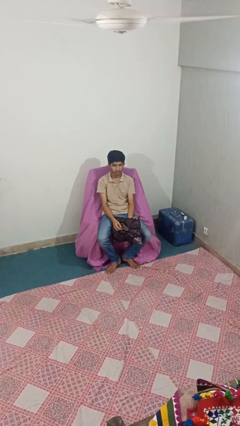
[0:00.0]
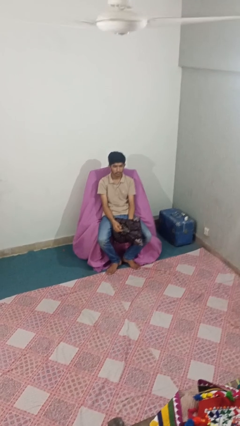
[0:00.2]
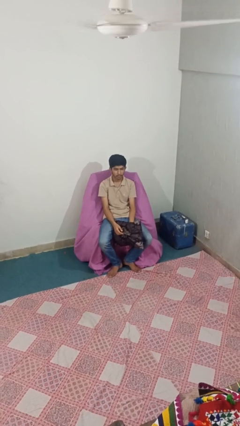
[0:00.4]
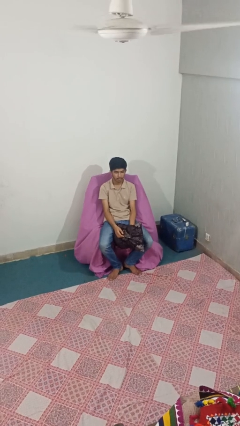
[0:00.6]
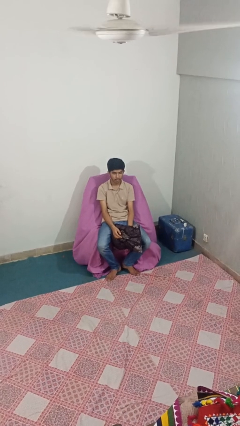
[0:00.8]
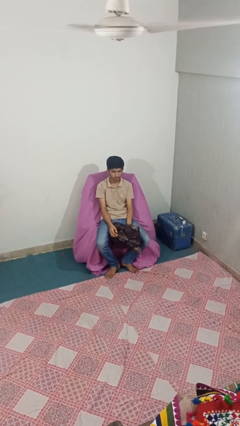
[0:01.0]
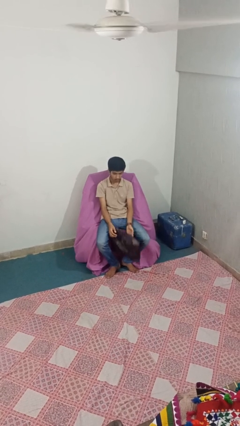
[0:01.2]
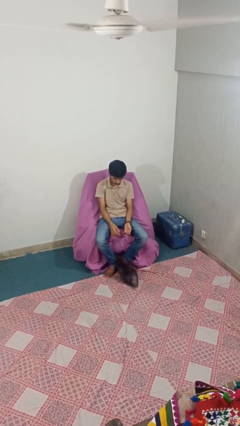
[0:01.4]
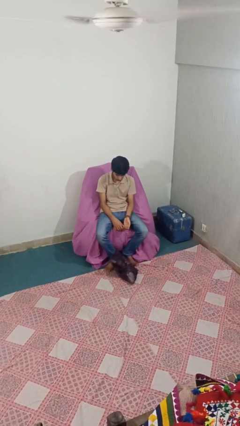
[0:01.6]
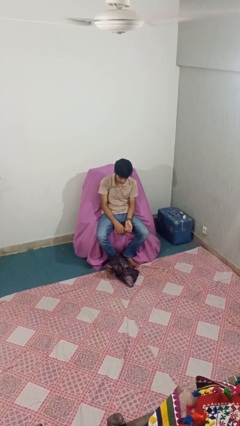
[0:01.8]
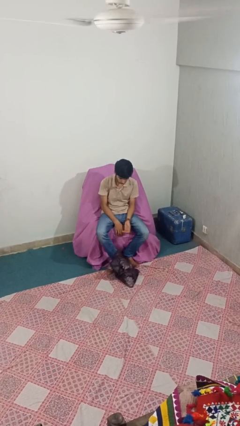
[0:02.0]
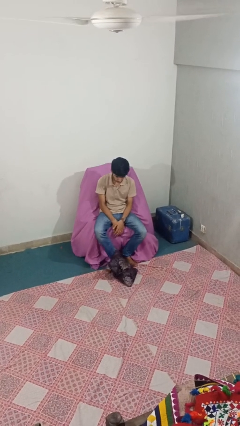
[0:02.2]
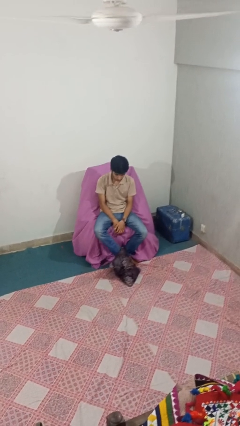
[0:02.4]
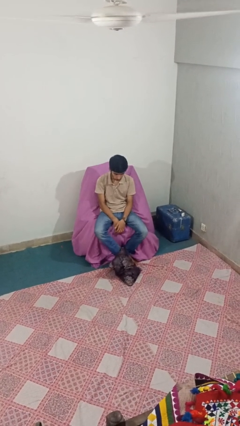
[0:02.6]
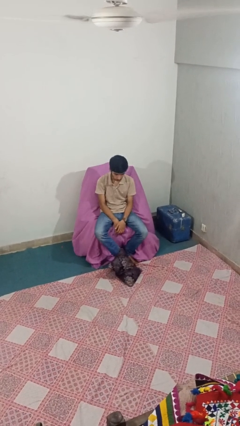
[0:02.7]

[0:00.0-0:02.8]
person drops object

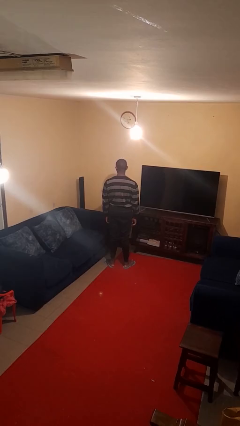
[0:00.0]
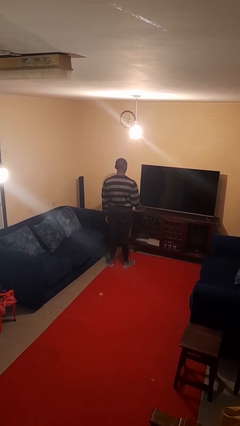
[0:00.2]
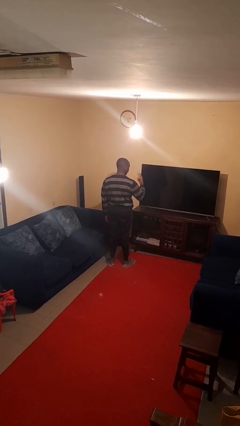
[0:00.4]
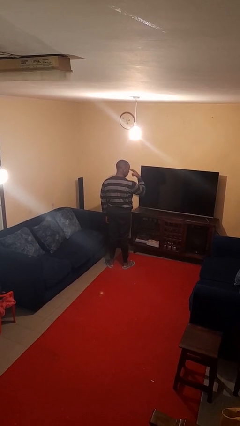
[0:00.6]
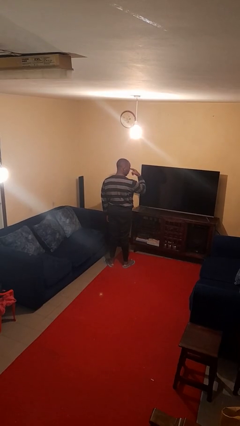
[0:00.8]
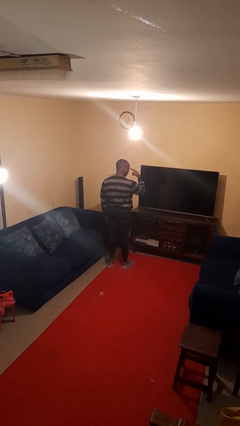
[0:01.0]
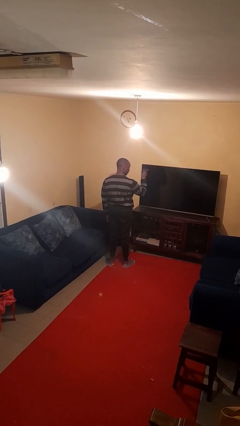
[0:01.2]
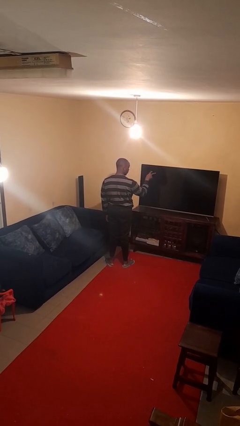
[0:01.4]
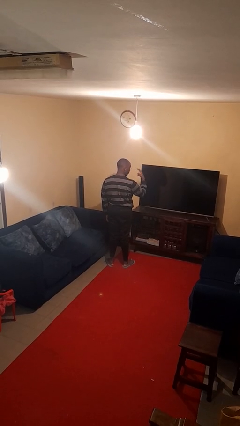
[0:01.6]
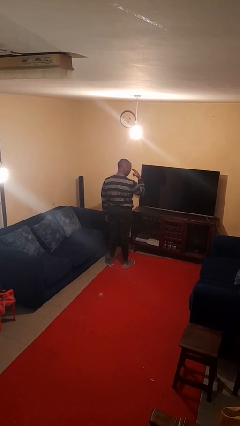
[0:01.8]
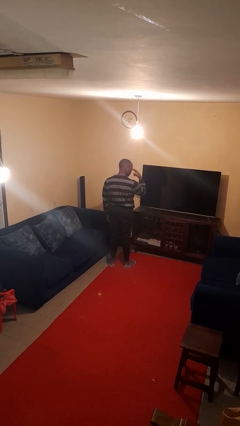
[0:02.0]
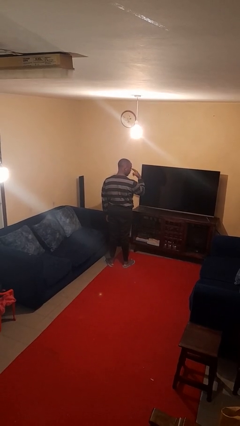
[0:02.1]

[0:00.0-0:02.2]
person gestures watch closely

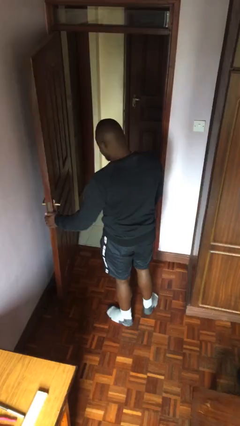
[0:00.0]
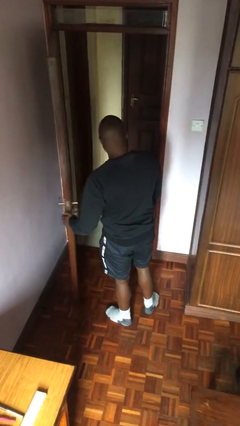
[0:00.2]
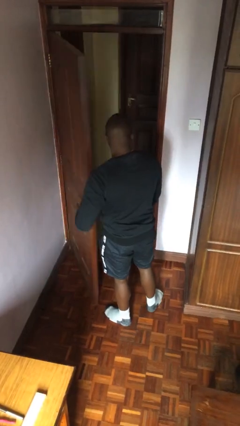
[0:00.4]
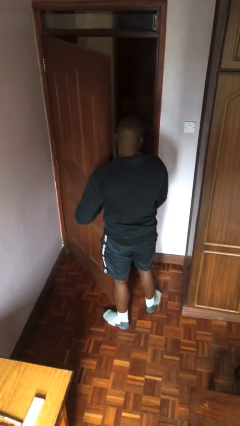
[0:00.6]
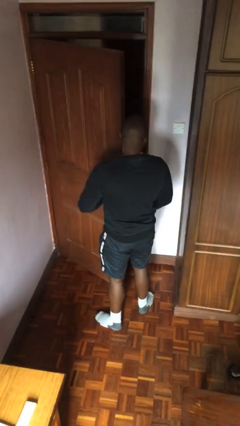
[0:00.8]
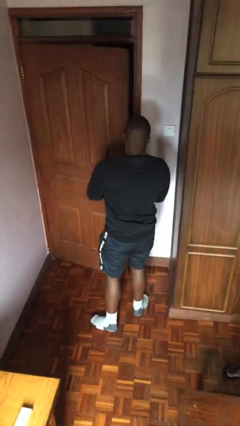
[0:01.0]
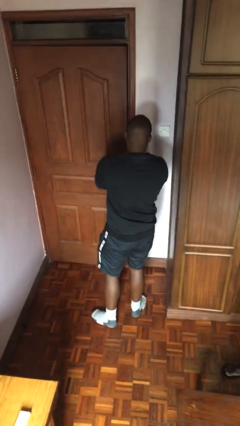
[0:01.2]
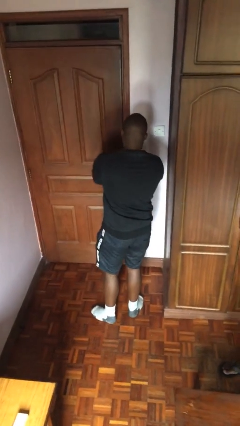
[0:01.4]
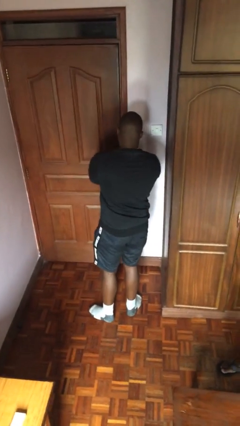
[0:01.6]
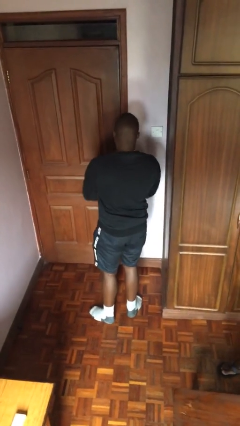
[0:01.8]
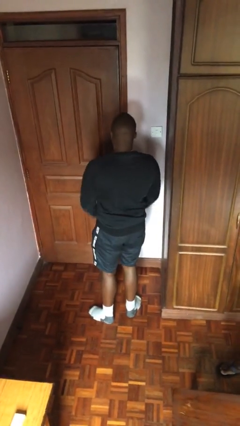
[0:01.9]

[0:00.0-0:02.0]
person closes facility door

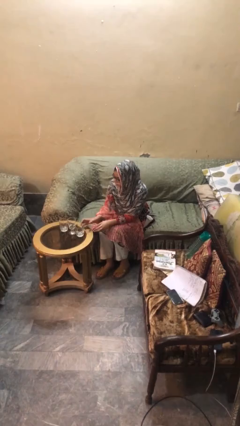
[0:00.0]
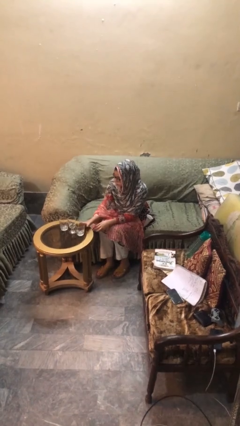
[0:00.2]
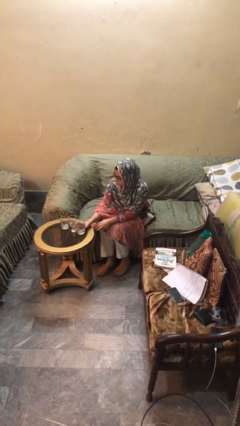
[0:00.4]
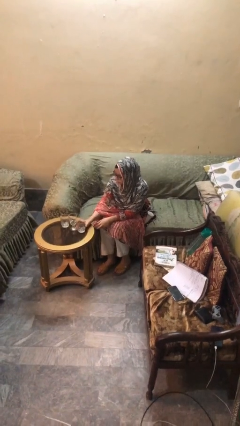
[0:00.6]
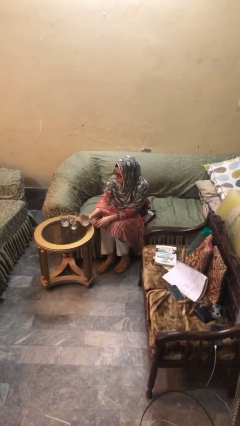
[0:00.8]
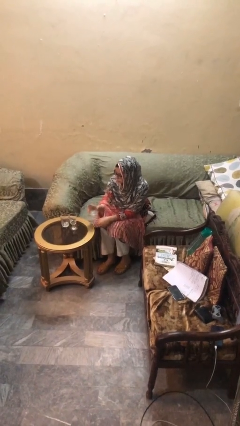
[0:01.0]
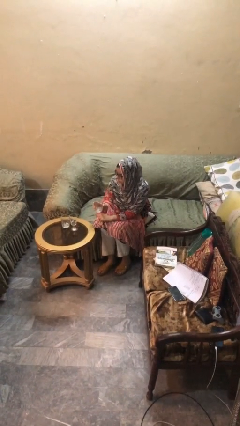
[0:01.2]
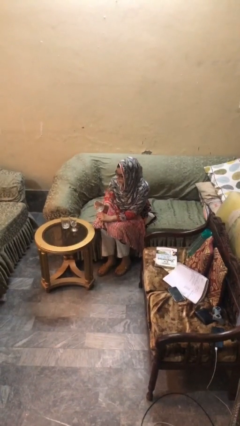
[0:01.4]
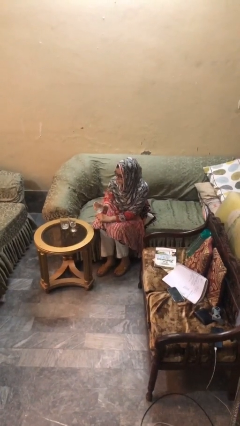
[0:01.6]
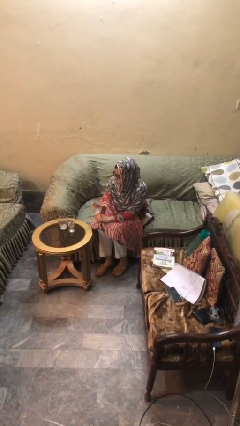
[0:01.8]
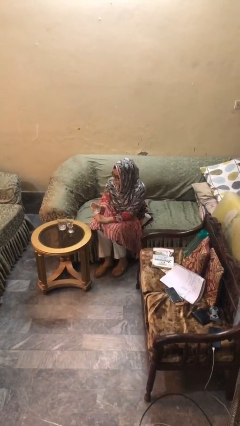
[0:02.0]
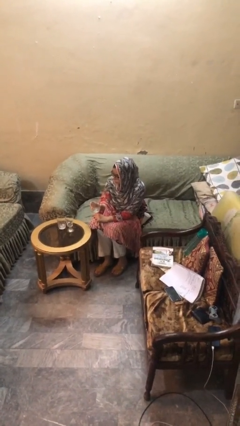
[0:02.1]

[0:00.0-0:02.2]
person picks up object from table

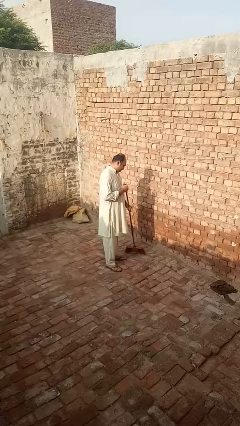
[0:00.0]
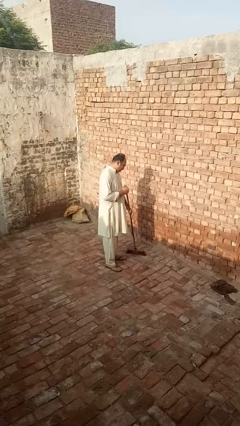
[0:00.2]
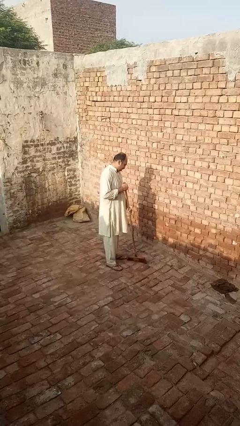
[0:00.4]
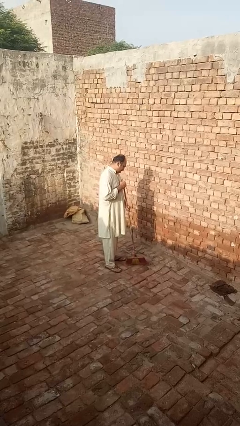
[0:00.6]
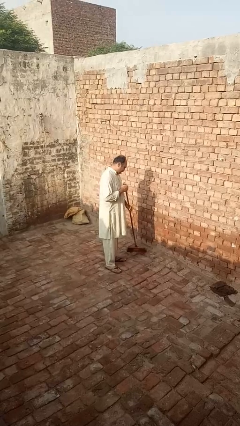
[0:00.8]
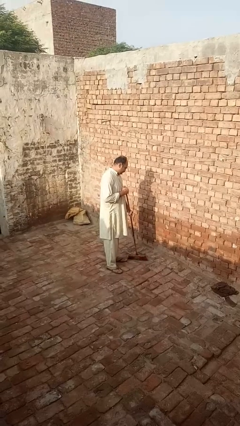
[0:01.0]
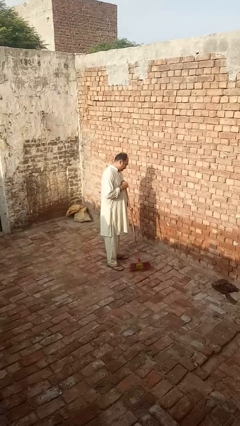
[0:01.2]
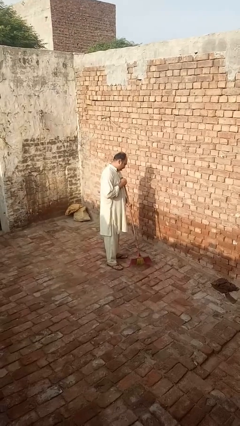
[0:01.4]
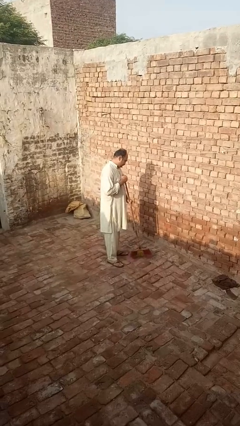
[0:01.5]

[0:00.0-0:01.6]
person sweeps floor

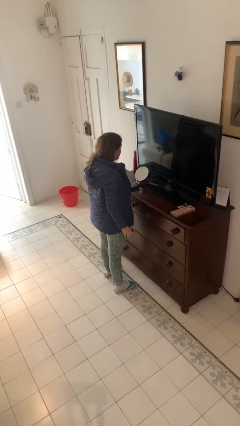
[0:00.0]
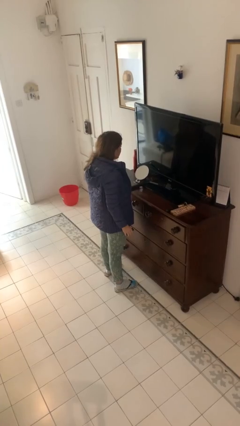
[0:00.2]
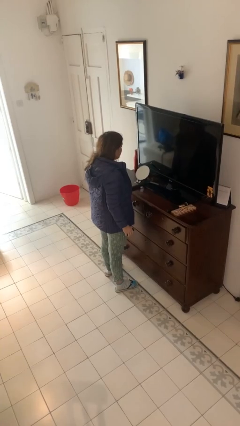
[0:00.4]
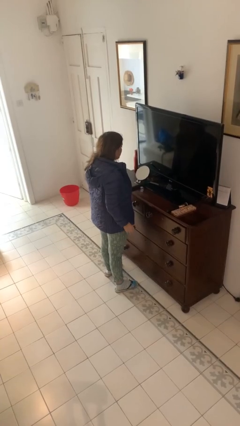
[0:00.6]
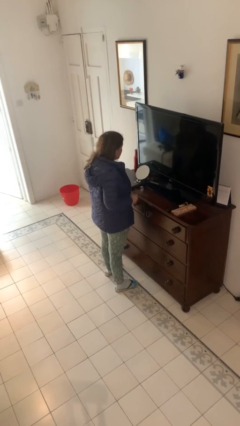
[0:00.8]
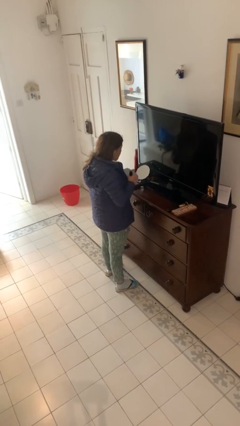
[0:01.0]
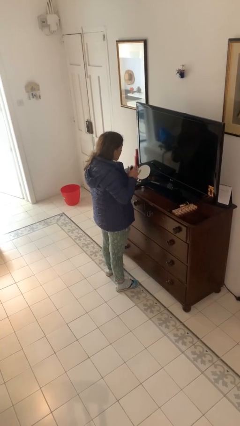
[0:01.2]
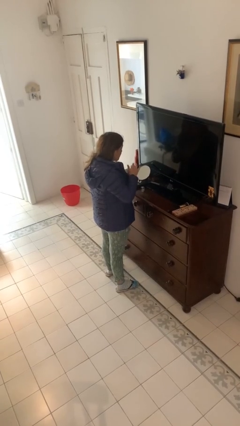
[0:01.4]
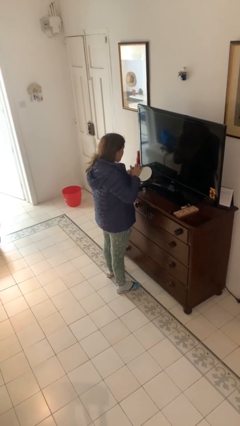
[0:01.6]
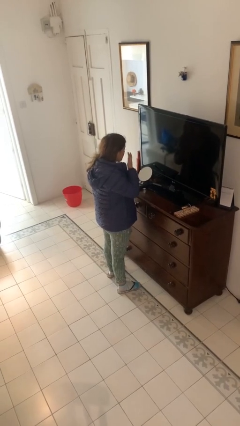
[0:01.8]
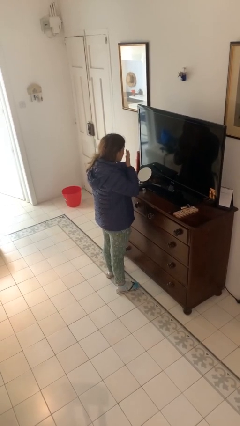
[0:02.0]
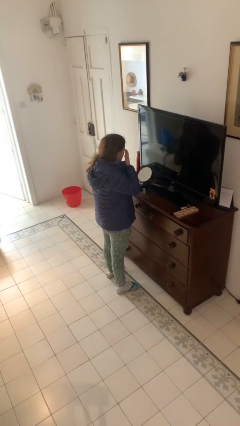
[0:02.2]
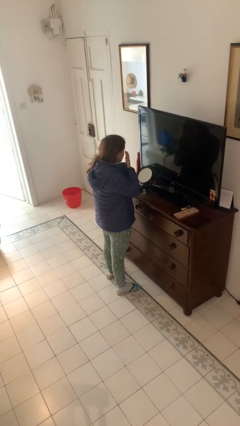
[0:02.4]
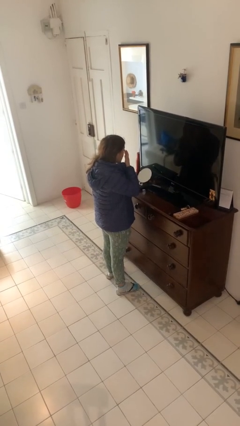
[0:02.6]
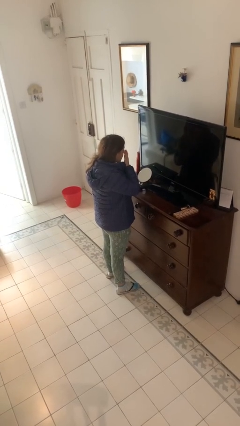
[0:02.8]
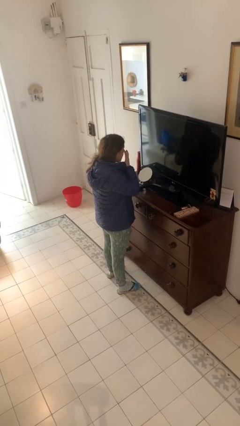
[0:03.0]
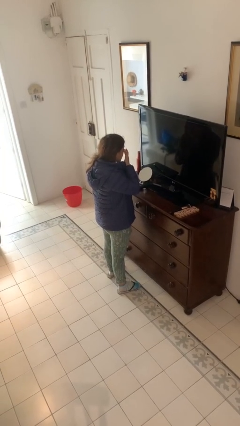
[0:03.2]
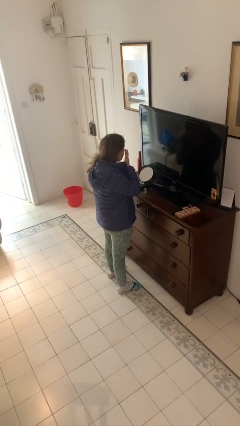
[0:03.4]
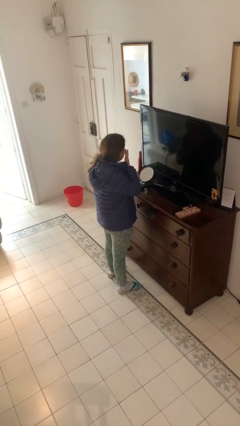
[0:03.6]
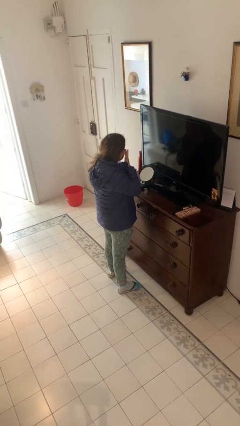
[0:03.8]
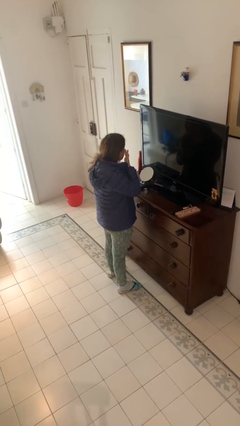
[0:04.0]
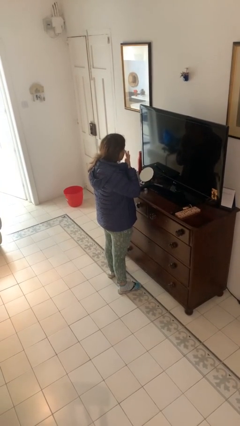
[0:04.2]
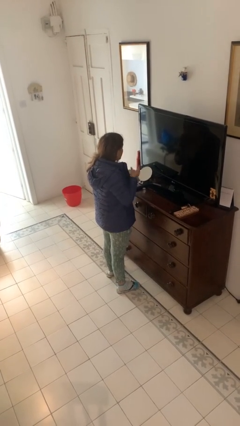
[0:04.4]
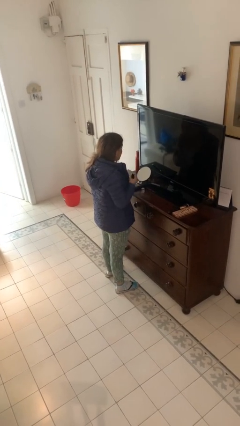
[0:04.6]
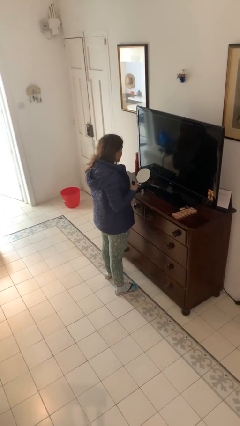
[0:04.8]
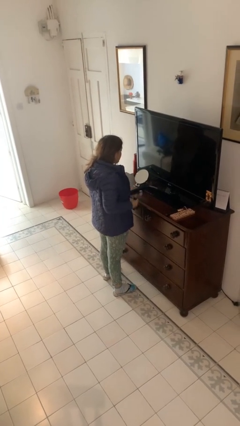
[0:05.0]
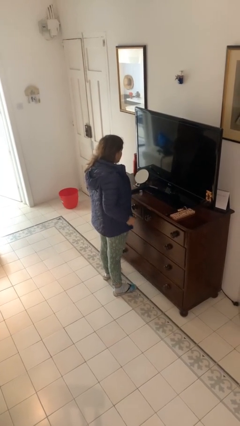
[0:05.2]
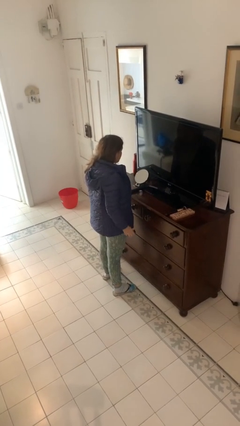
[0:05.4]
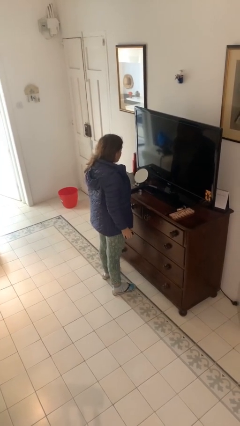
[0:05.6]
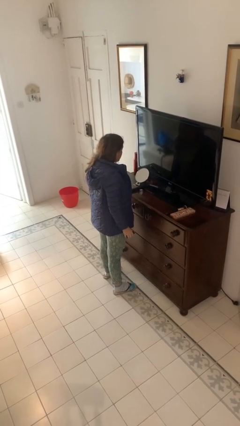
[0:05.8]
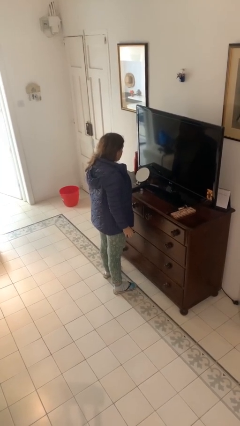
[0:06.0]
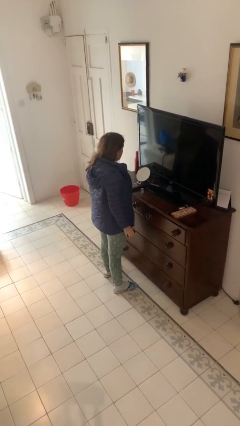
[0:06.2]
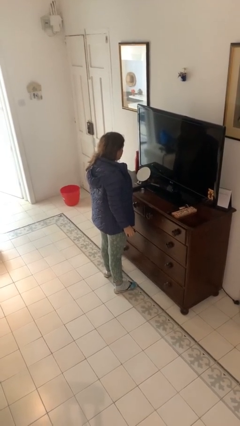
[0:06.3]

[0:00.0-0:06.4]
person applies foundation makeup
